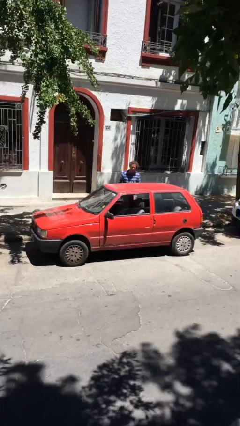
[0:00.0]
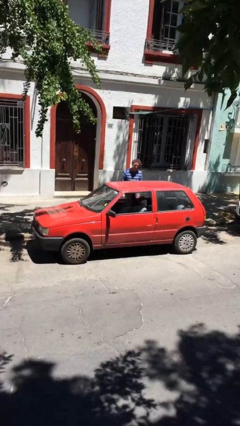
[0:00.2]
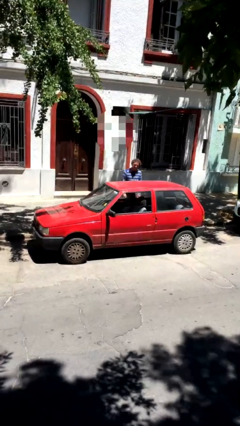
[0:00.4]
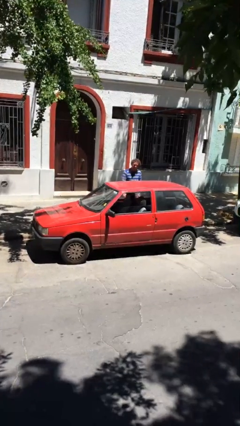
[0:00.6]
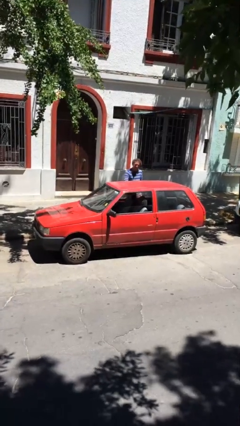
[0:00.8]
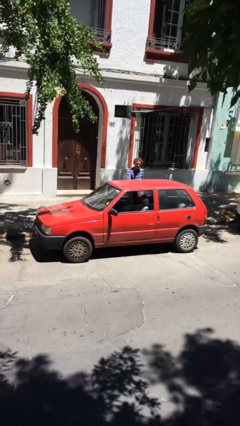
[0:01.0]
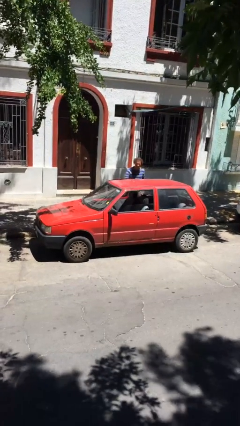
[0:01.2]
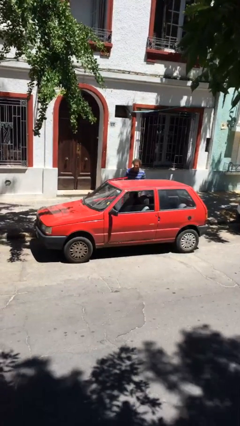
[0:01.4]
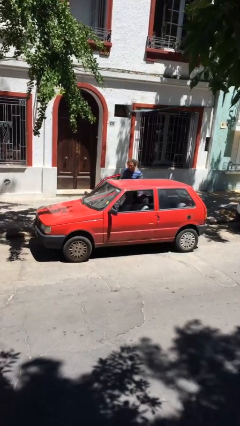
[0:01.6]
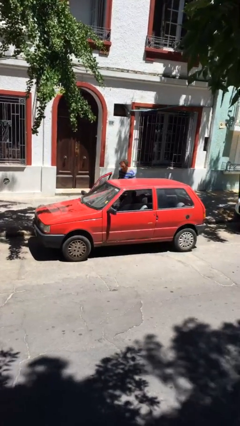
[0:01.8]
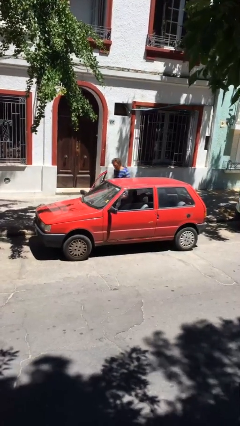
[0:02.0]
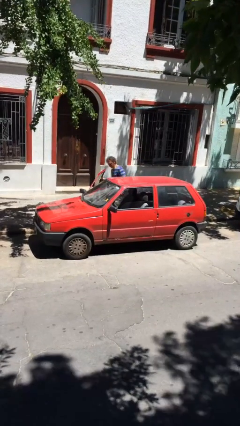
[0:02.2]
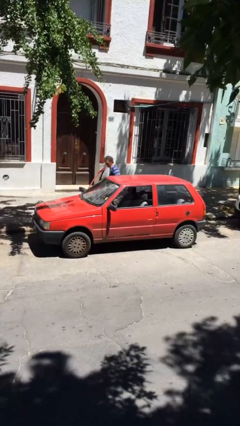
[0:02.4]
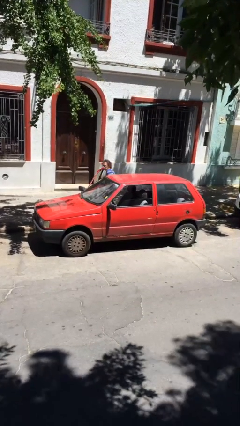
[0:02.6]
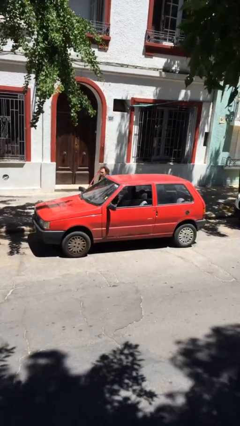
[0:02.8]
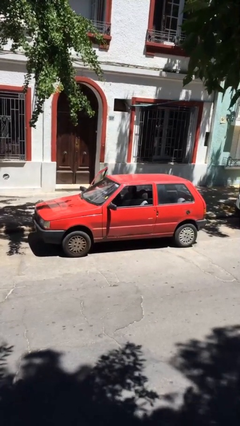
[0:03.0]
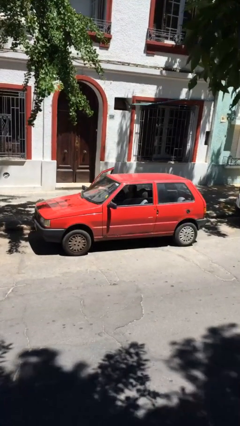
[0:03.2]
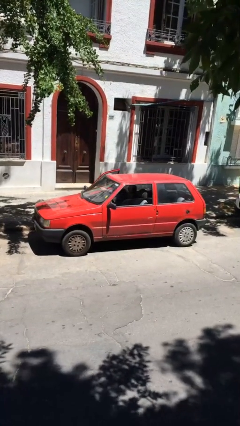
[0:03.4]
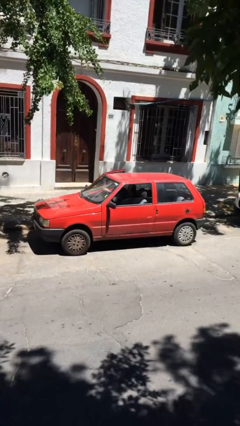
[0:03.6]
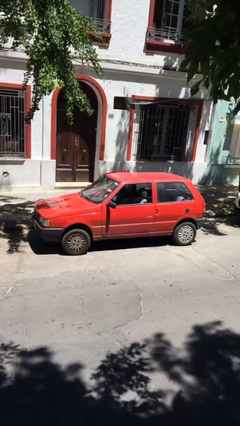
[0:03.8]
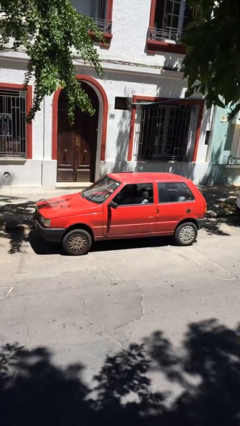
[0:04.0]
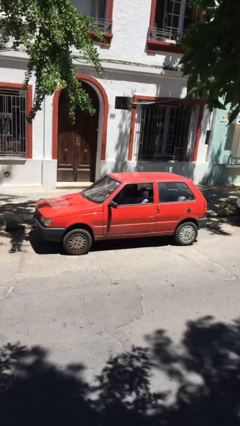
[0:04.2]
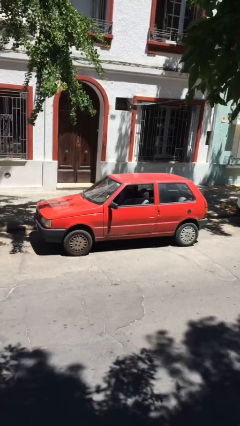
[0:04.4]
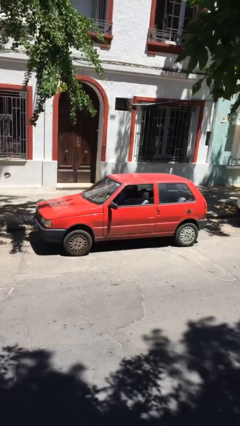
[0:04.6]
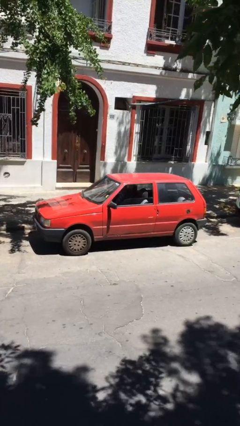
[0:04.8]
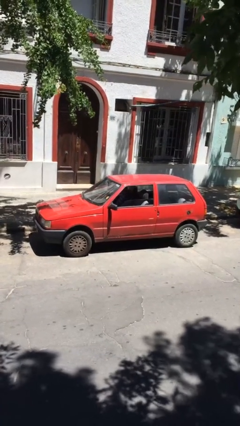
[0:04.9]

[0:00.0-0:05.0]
car picks up person

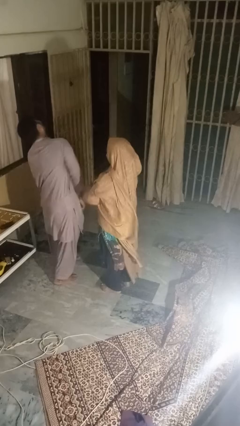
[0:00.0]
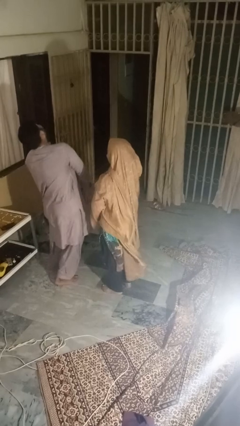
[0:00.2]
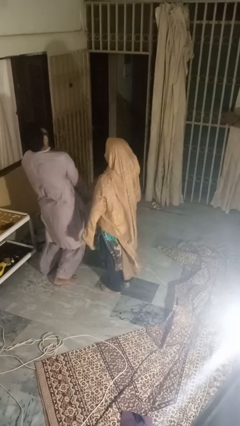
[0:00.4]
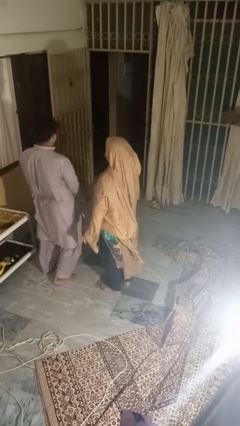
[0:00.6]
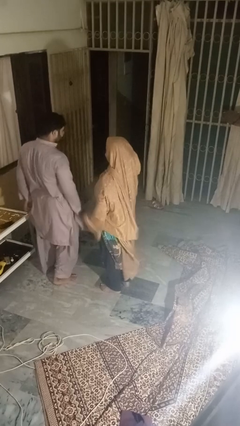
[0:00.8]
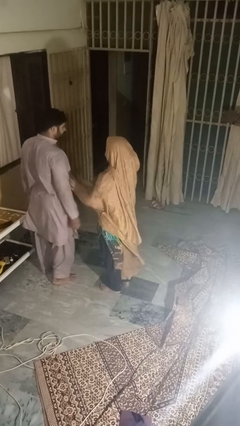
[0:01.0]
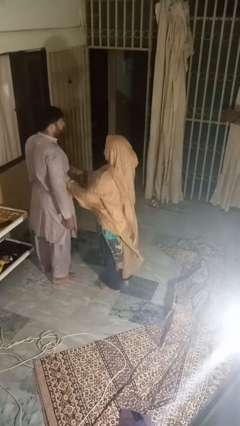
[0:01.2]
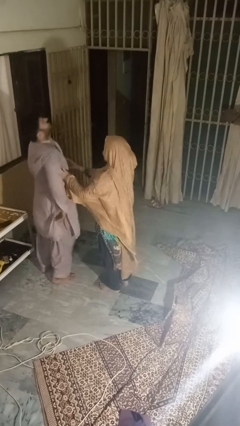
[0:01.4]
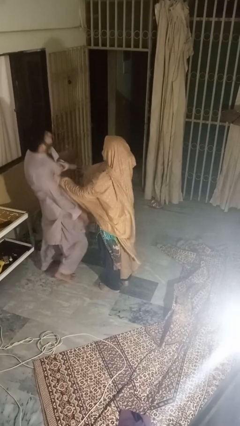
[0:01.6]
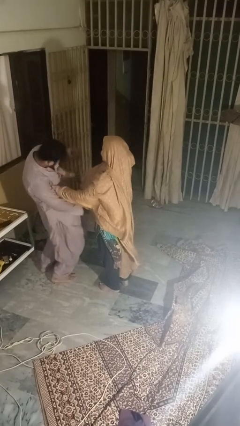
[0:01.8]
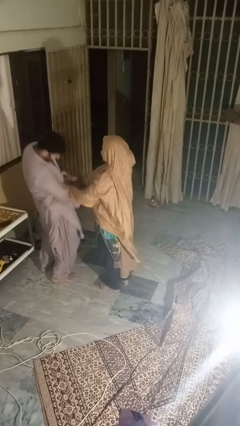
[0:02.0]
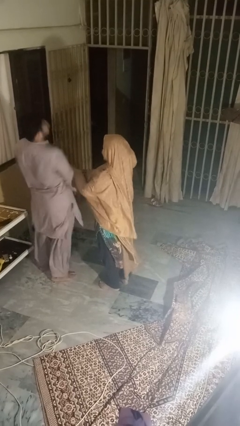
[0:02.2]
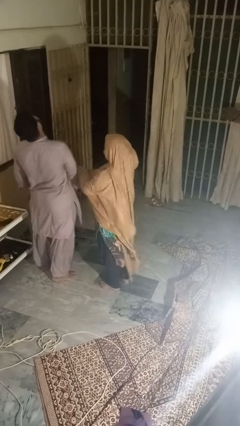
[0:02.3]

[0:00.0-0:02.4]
person tickles person

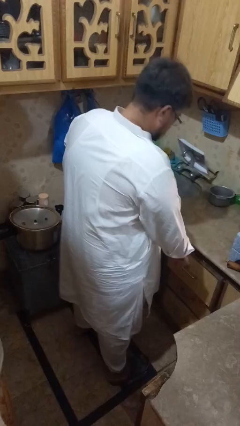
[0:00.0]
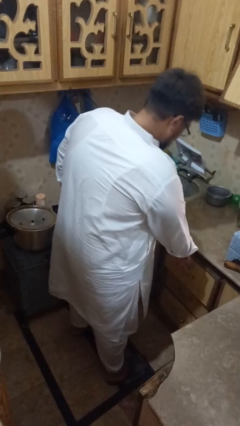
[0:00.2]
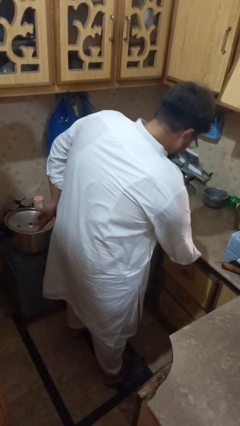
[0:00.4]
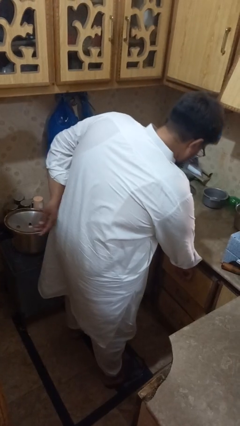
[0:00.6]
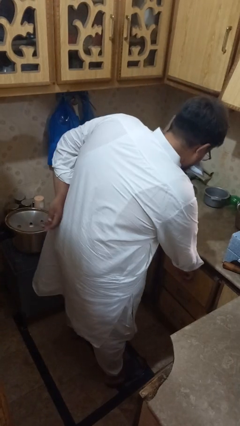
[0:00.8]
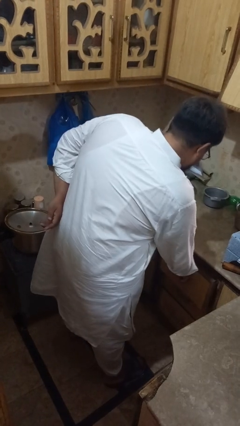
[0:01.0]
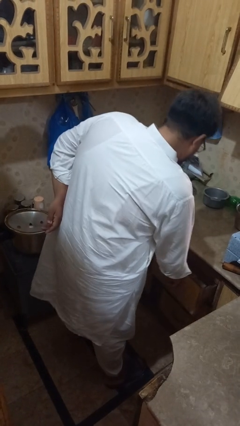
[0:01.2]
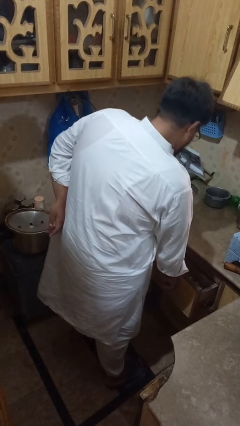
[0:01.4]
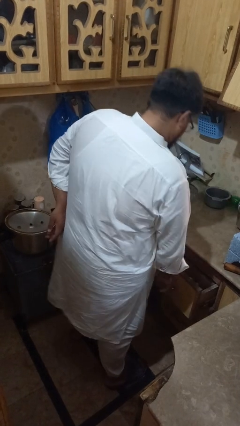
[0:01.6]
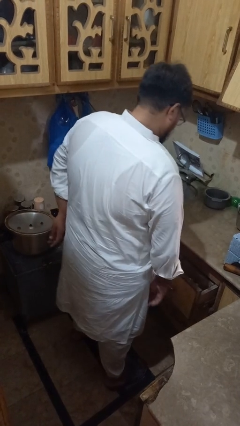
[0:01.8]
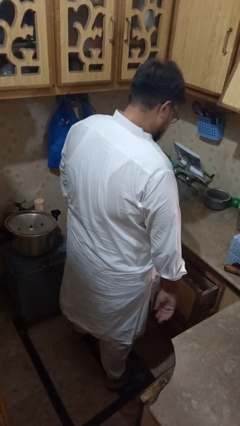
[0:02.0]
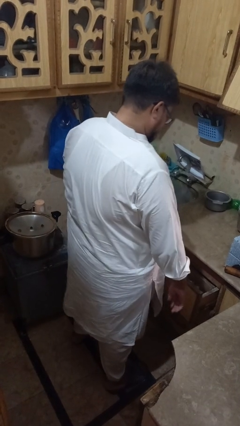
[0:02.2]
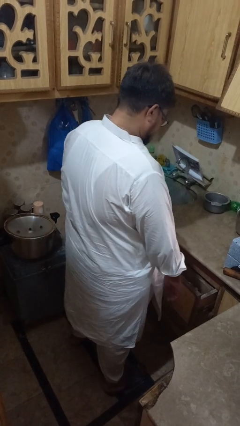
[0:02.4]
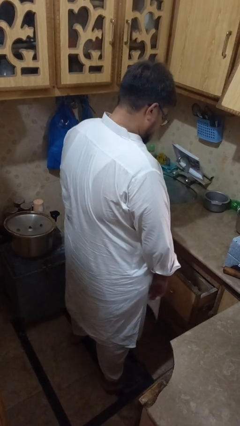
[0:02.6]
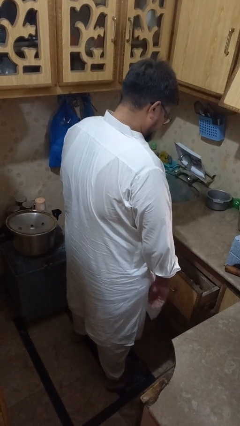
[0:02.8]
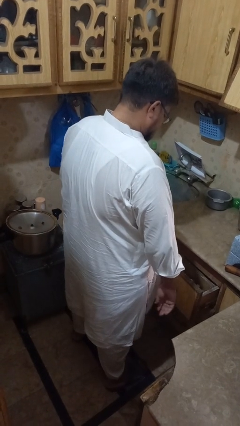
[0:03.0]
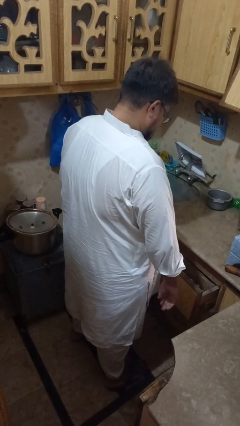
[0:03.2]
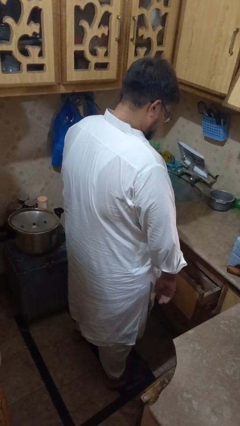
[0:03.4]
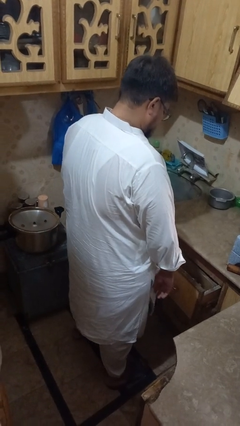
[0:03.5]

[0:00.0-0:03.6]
person opens kitchen drawer

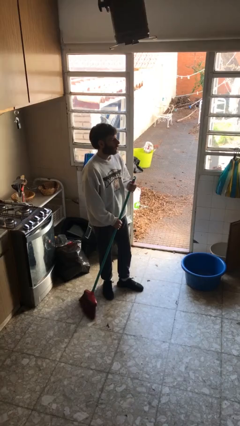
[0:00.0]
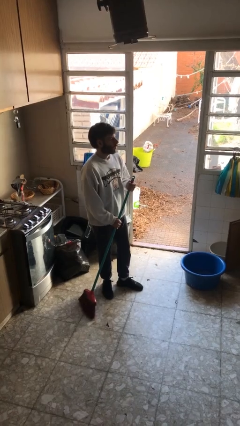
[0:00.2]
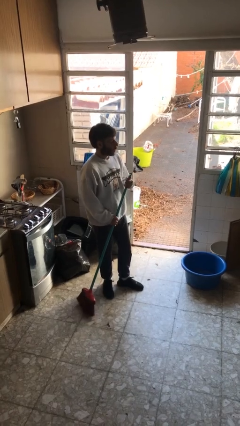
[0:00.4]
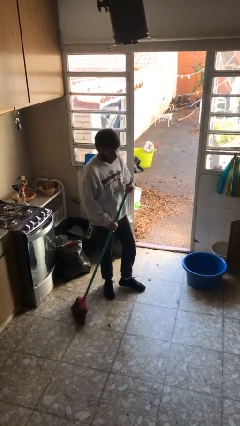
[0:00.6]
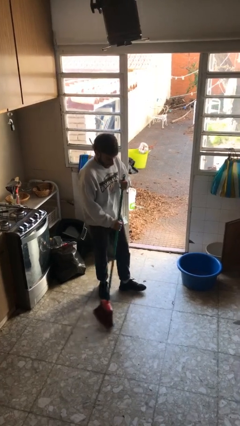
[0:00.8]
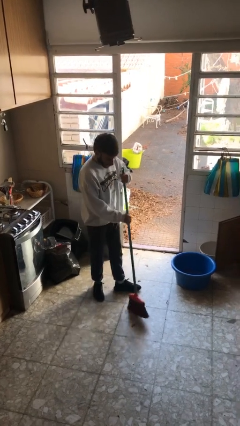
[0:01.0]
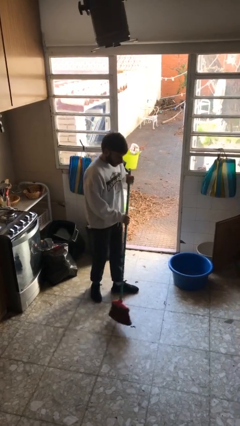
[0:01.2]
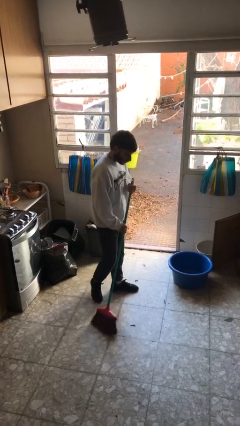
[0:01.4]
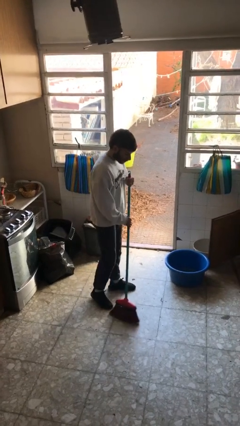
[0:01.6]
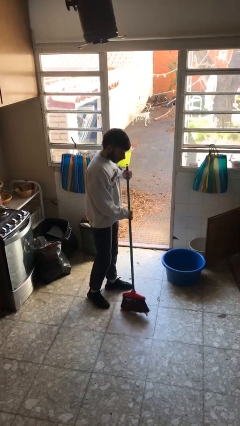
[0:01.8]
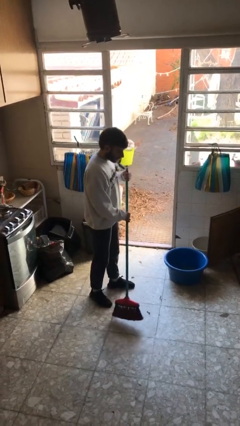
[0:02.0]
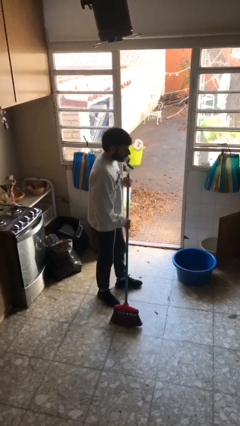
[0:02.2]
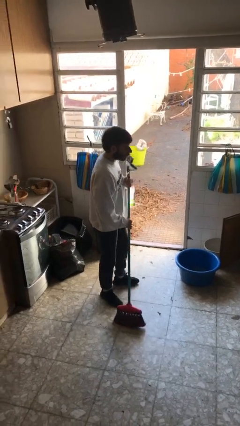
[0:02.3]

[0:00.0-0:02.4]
person sweeps floor

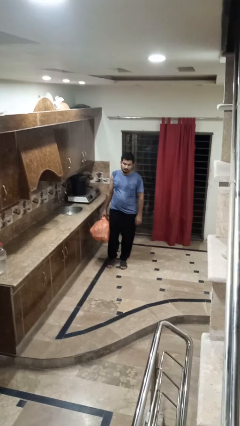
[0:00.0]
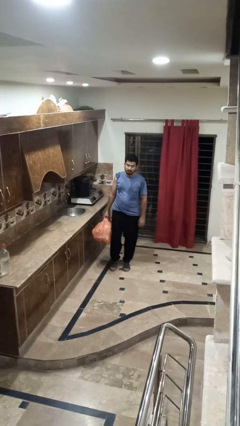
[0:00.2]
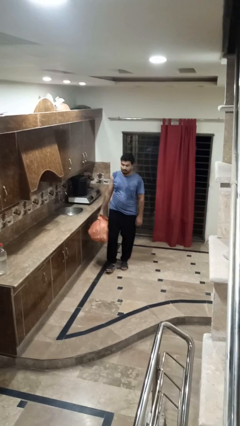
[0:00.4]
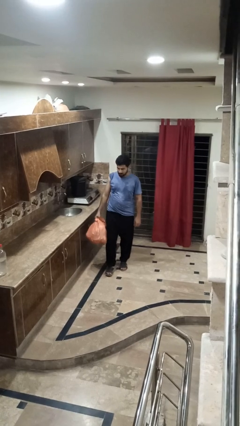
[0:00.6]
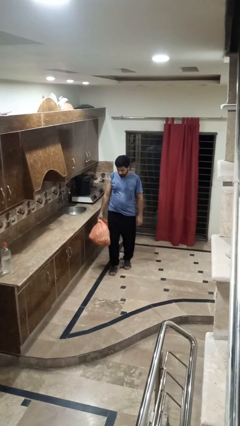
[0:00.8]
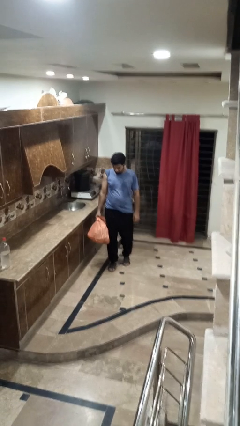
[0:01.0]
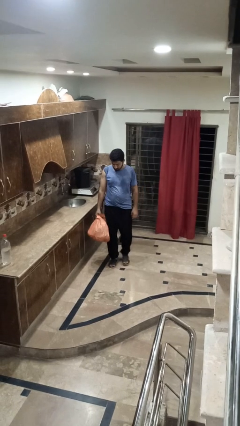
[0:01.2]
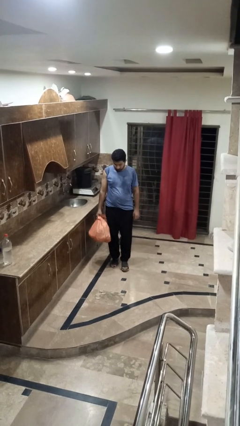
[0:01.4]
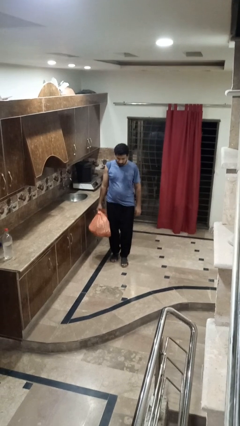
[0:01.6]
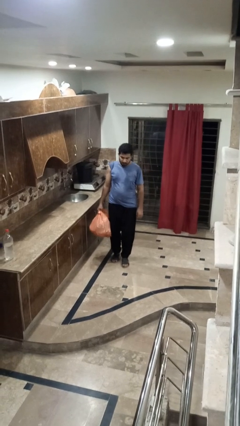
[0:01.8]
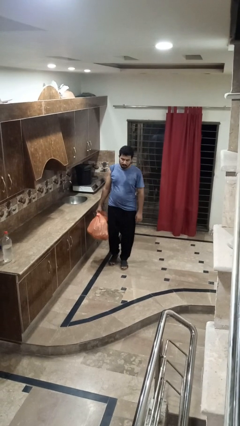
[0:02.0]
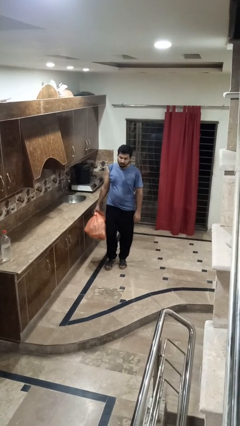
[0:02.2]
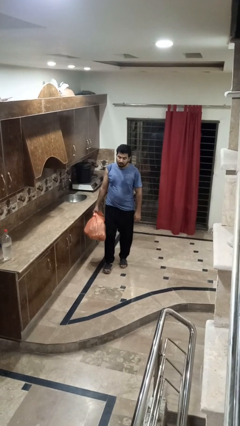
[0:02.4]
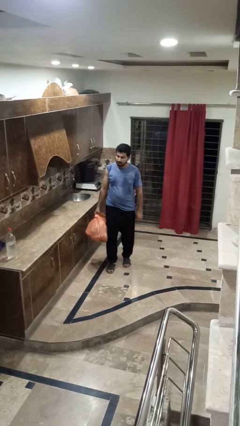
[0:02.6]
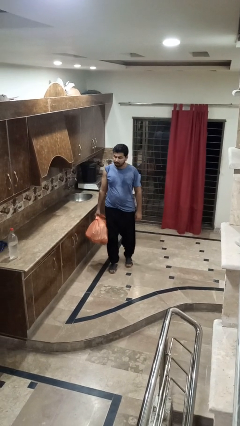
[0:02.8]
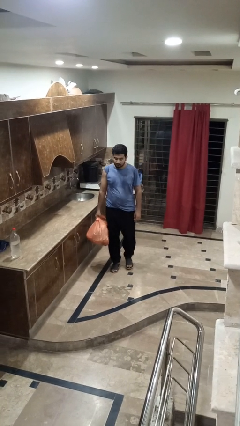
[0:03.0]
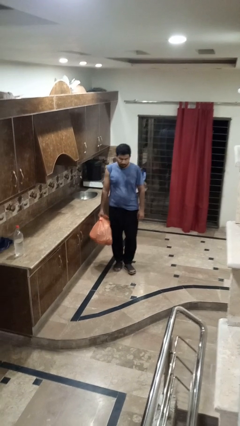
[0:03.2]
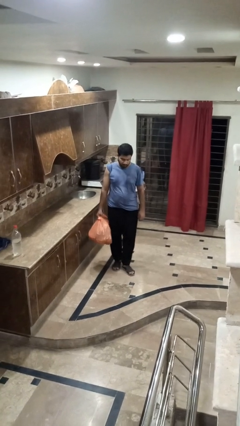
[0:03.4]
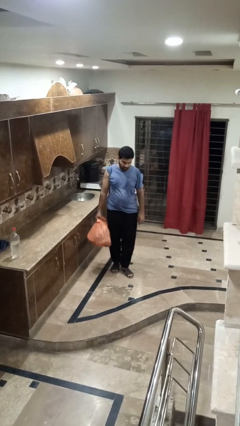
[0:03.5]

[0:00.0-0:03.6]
person carries groceries

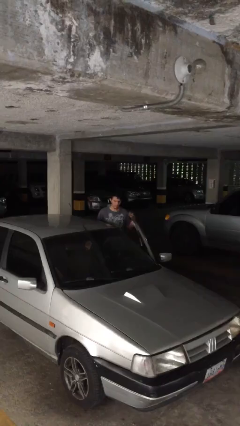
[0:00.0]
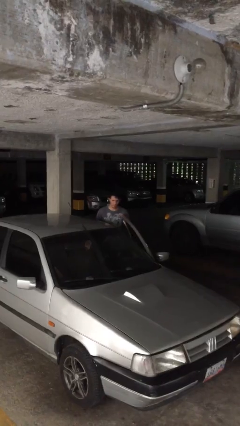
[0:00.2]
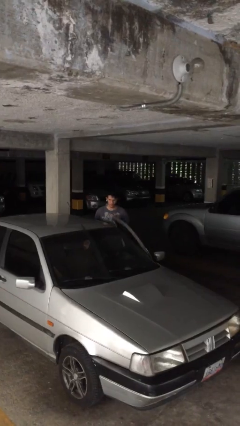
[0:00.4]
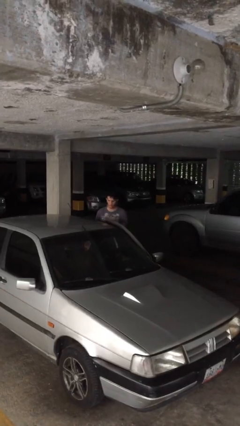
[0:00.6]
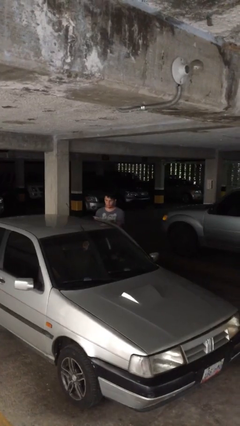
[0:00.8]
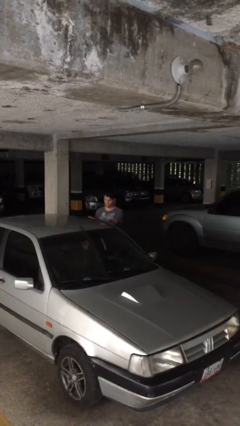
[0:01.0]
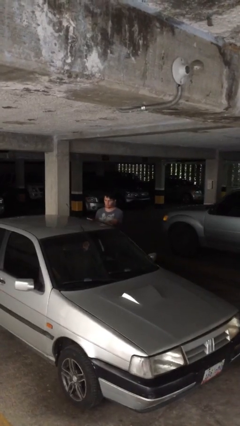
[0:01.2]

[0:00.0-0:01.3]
person closes car door
